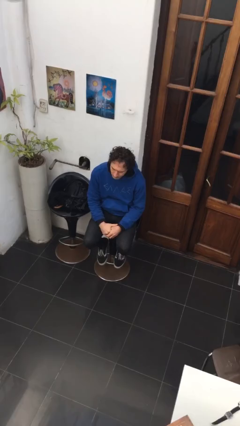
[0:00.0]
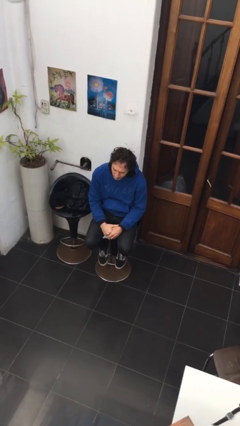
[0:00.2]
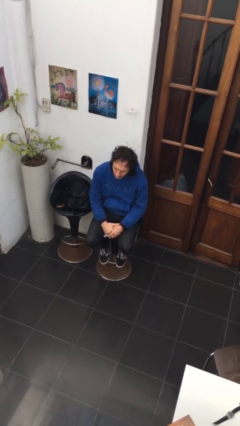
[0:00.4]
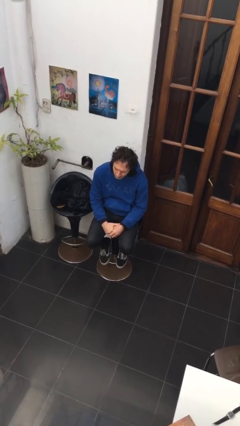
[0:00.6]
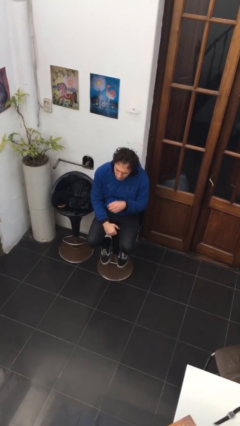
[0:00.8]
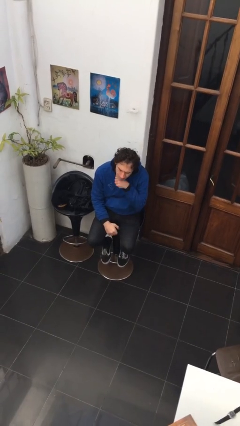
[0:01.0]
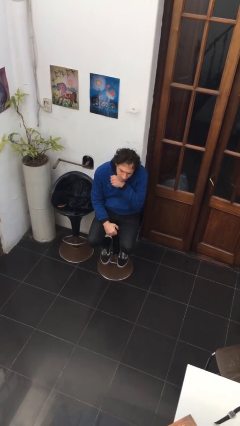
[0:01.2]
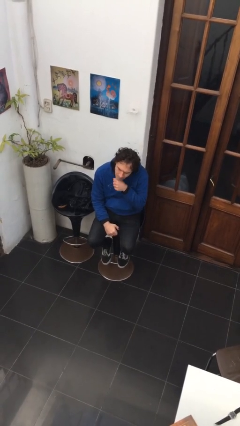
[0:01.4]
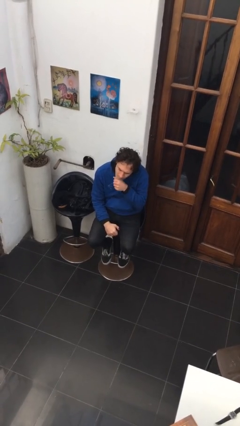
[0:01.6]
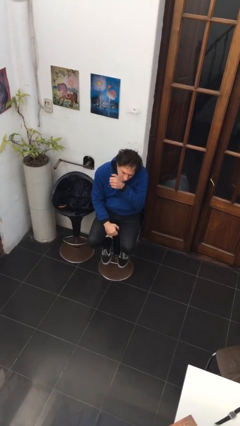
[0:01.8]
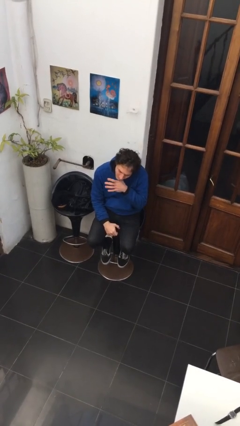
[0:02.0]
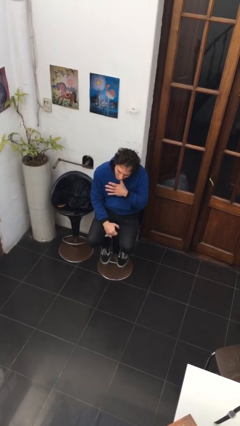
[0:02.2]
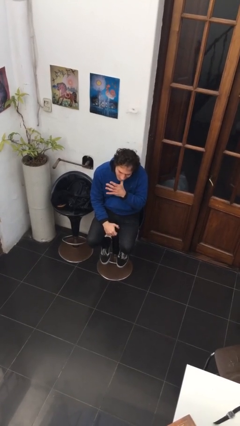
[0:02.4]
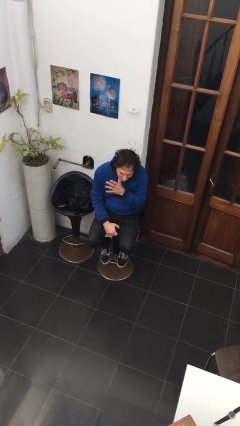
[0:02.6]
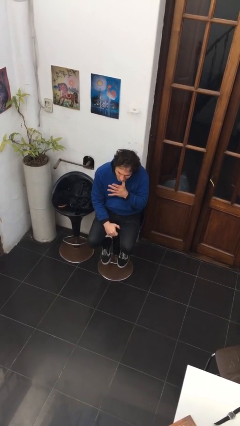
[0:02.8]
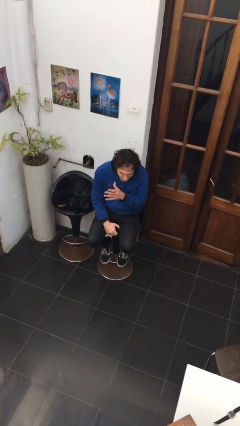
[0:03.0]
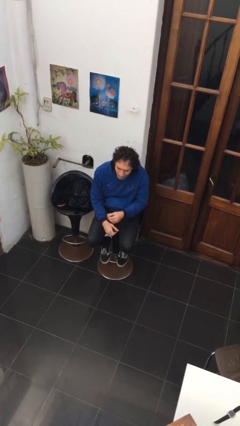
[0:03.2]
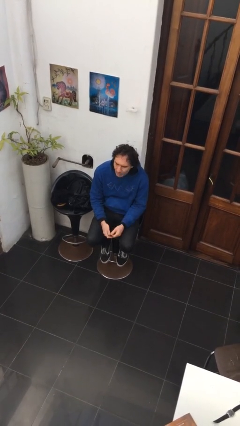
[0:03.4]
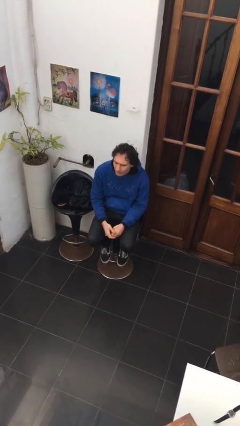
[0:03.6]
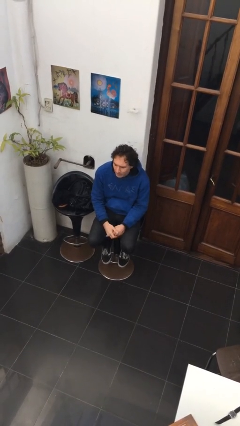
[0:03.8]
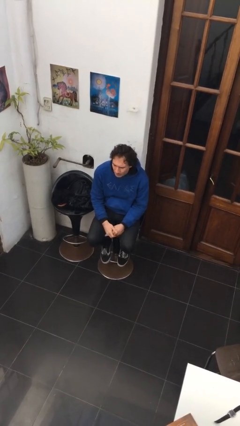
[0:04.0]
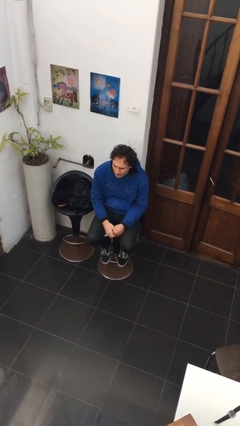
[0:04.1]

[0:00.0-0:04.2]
person scratches face

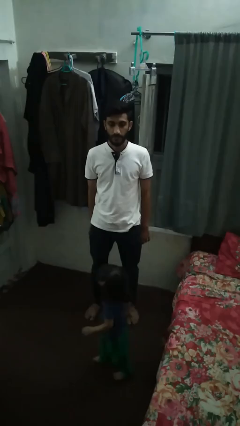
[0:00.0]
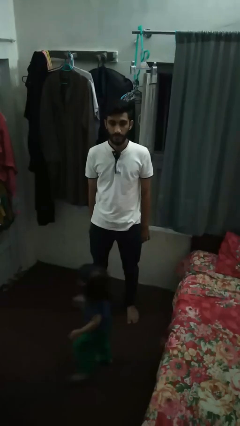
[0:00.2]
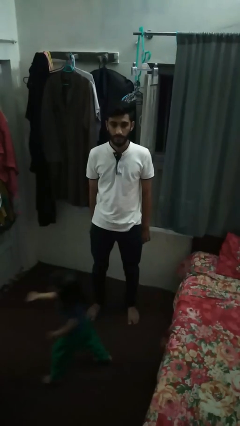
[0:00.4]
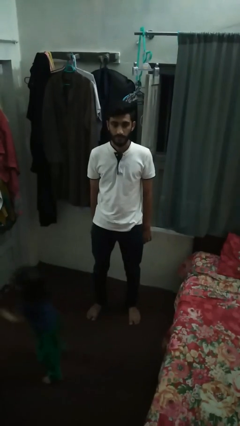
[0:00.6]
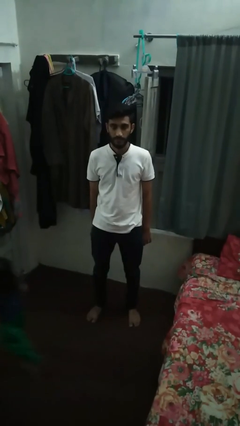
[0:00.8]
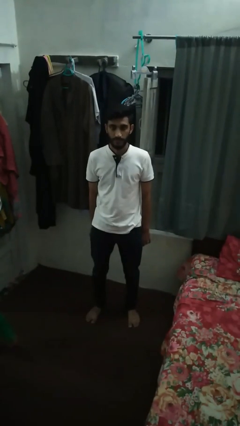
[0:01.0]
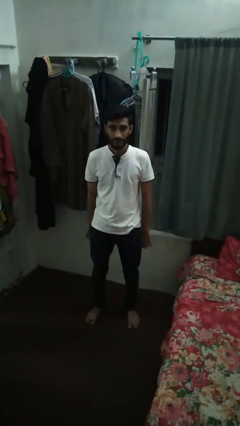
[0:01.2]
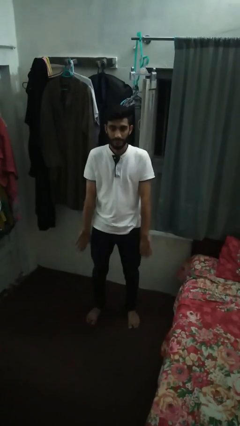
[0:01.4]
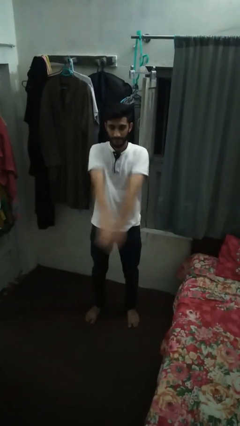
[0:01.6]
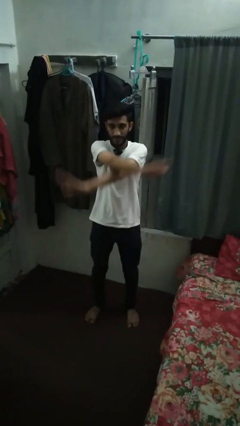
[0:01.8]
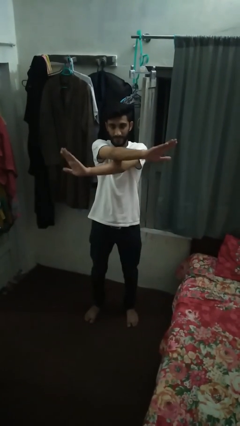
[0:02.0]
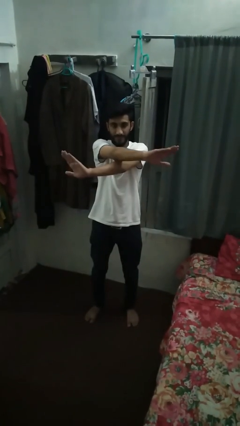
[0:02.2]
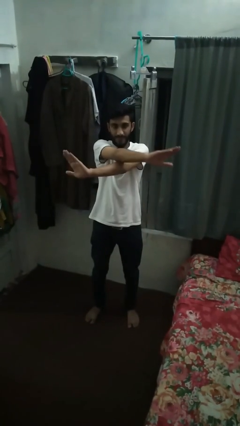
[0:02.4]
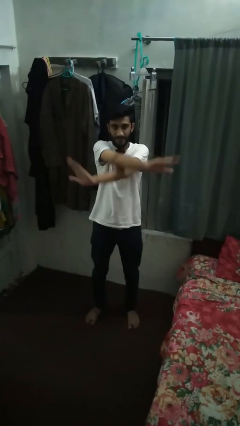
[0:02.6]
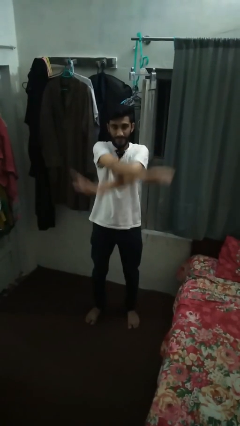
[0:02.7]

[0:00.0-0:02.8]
person gestures arms x

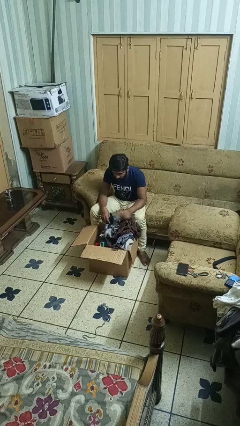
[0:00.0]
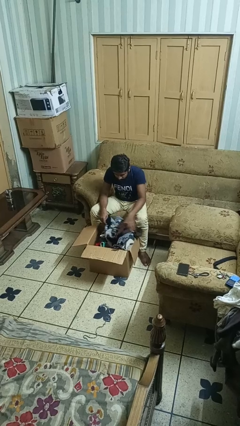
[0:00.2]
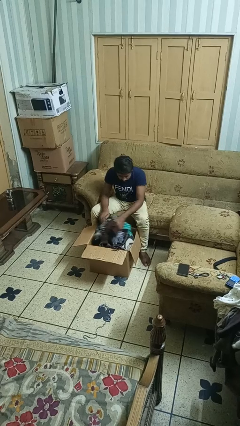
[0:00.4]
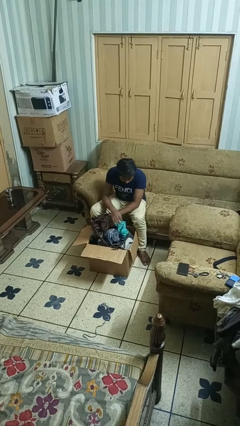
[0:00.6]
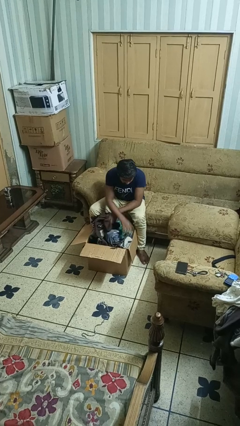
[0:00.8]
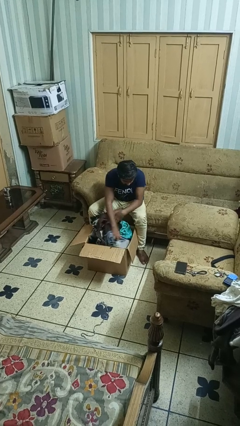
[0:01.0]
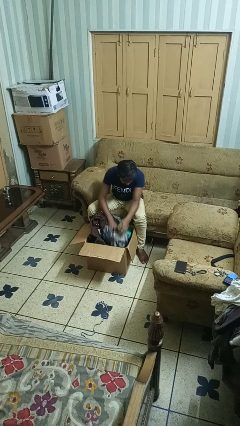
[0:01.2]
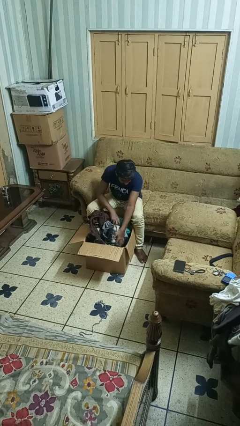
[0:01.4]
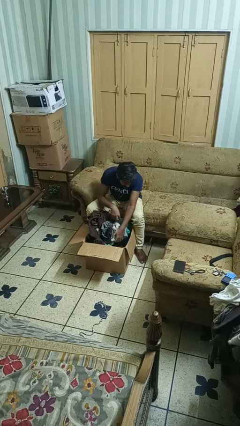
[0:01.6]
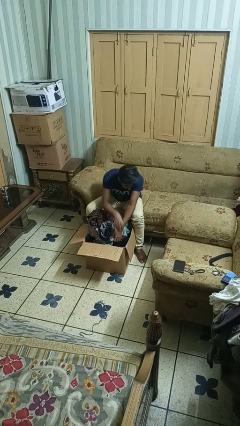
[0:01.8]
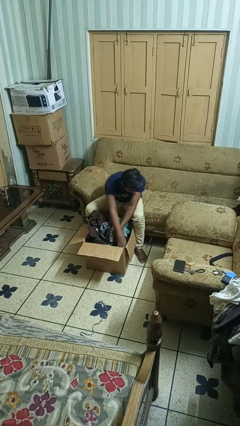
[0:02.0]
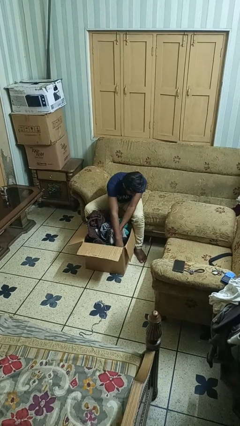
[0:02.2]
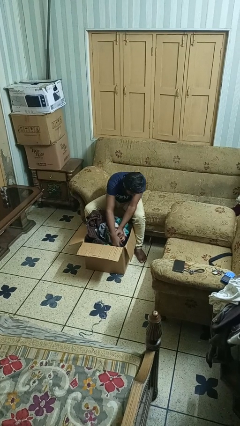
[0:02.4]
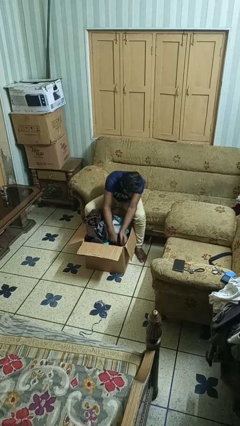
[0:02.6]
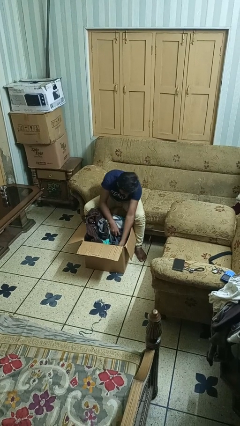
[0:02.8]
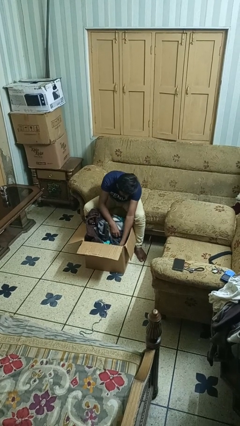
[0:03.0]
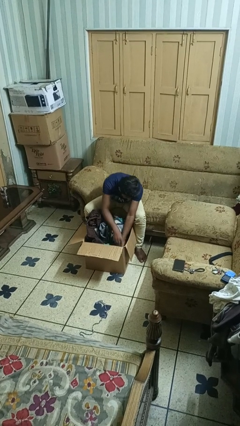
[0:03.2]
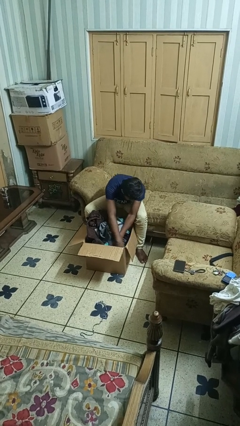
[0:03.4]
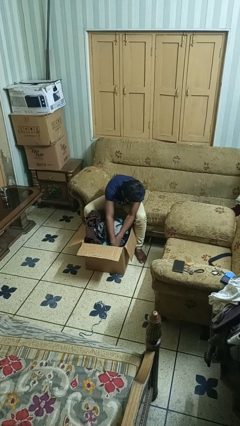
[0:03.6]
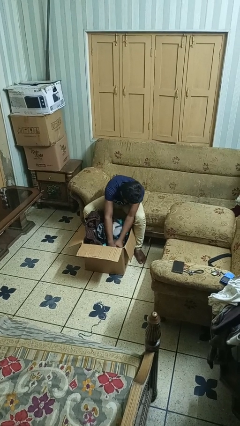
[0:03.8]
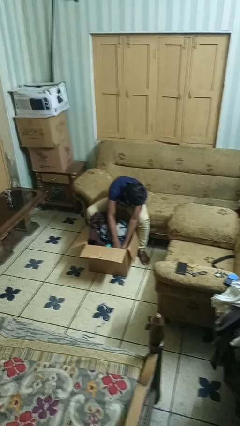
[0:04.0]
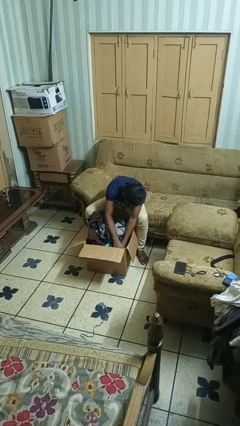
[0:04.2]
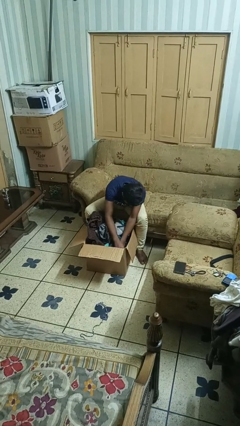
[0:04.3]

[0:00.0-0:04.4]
person searches in box

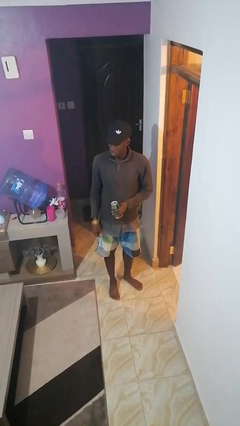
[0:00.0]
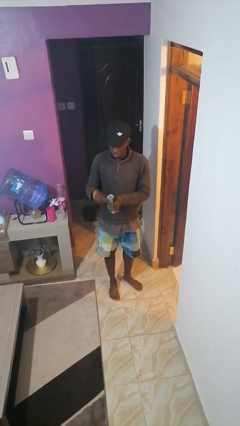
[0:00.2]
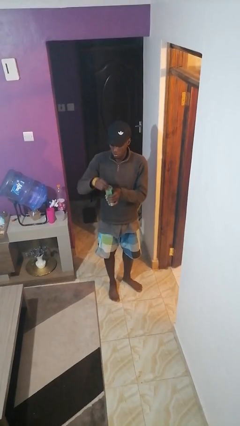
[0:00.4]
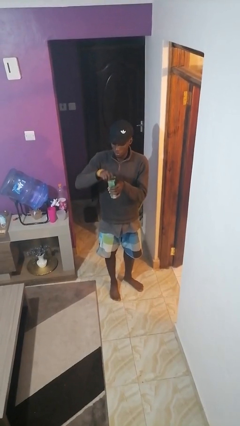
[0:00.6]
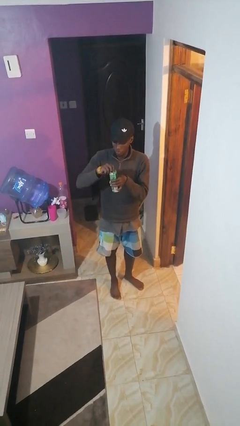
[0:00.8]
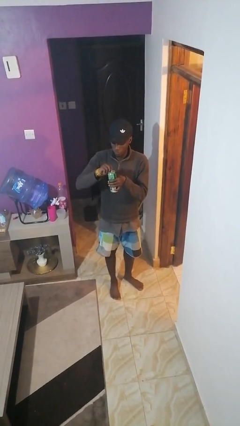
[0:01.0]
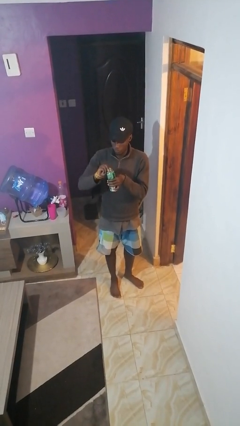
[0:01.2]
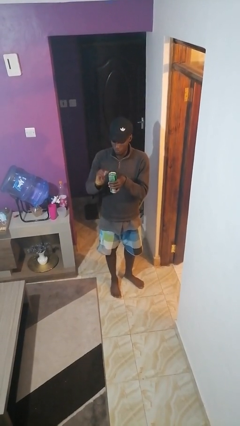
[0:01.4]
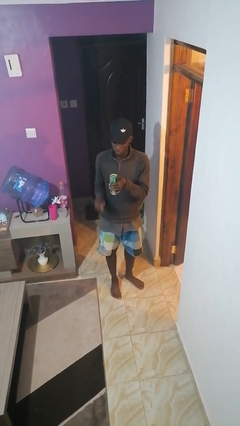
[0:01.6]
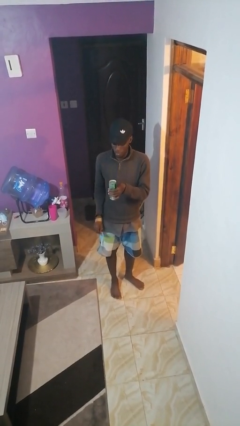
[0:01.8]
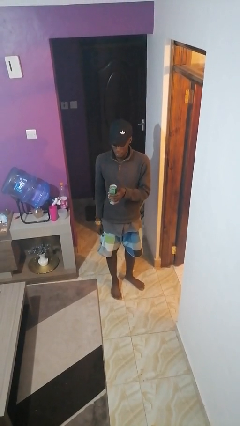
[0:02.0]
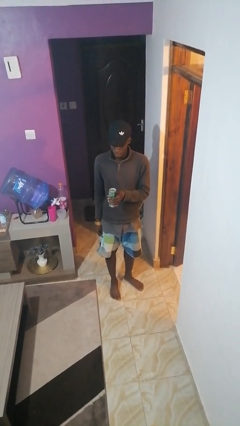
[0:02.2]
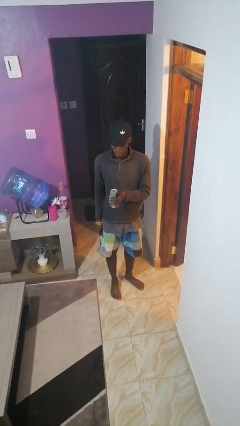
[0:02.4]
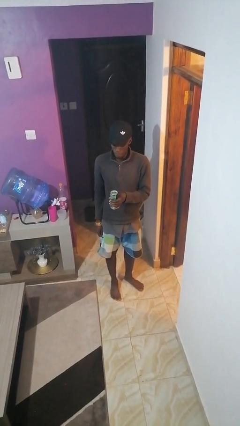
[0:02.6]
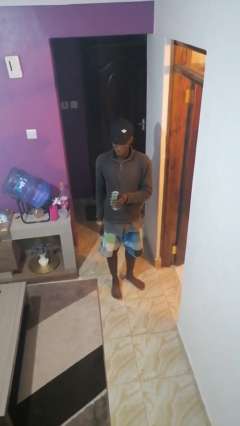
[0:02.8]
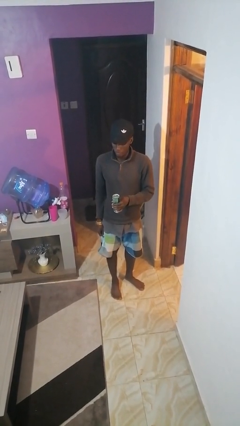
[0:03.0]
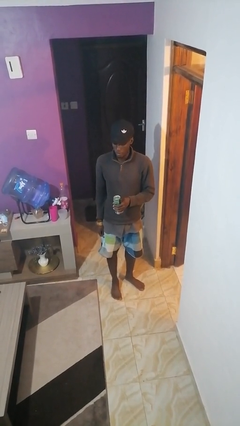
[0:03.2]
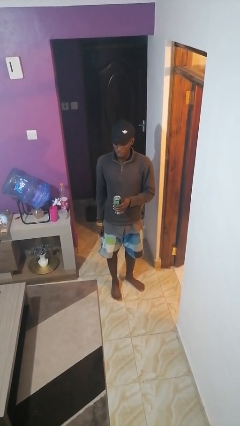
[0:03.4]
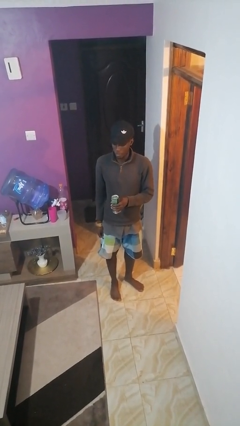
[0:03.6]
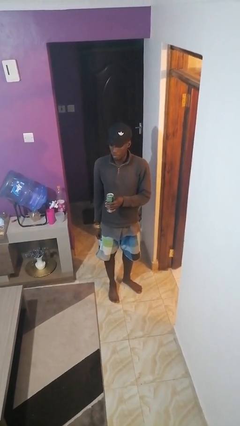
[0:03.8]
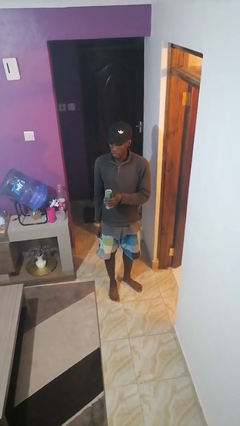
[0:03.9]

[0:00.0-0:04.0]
person opens beverage can

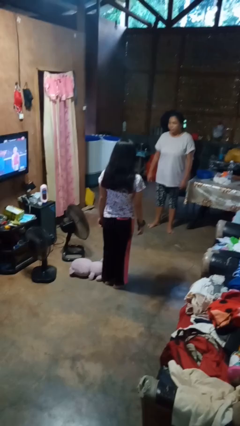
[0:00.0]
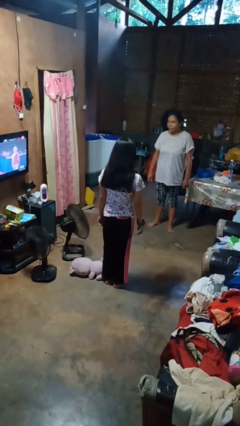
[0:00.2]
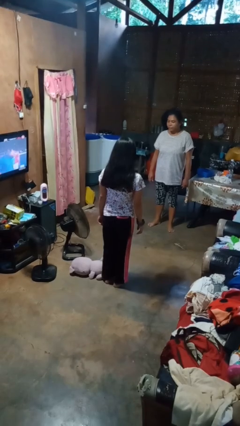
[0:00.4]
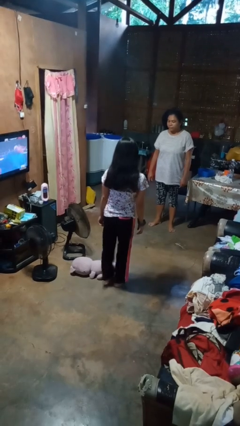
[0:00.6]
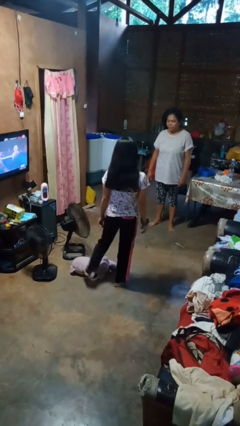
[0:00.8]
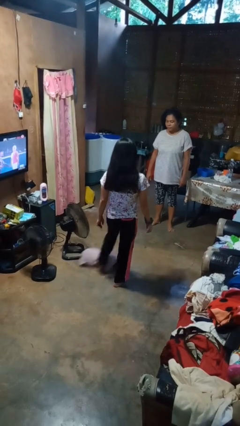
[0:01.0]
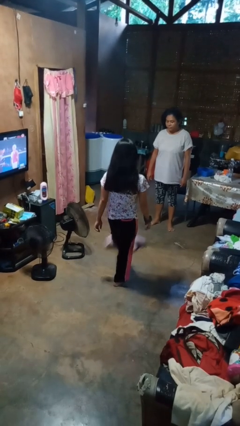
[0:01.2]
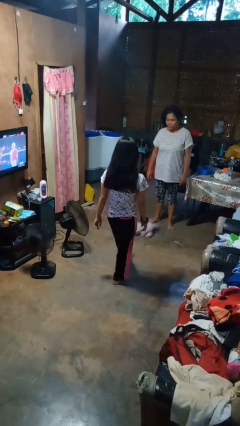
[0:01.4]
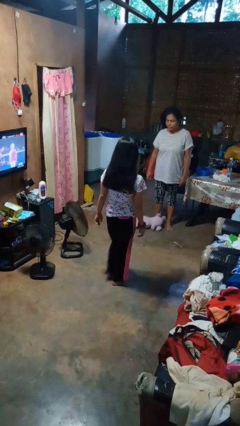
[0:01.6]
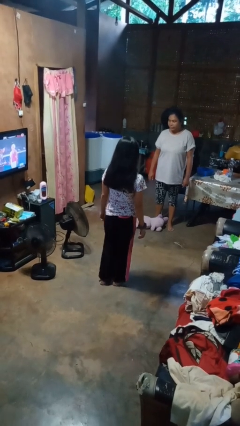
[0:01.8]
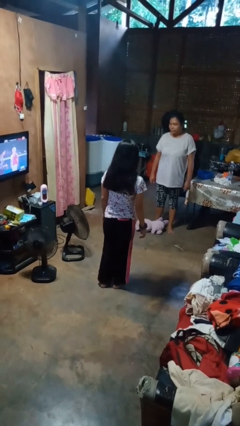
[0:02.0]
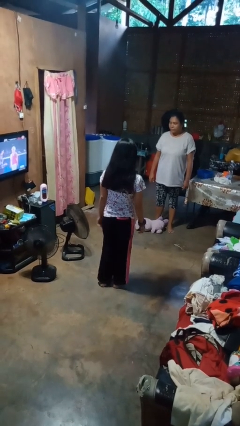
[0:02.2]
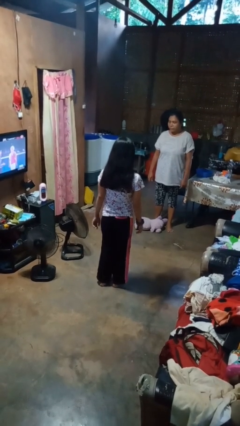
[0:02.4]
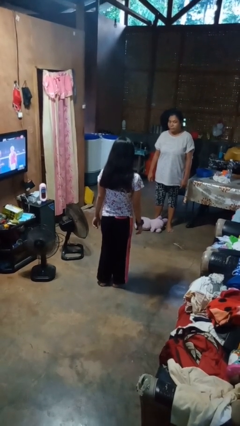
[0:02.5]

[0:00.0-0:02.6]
person kicks object to person
